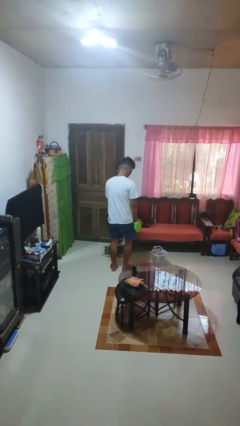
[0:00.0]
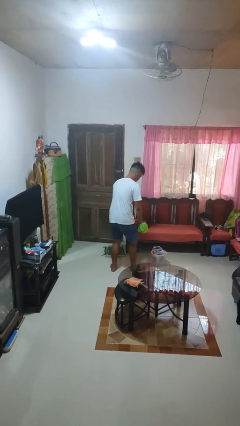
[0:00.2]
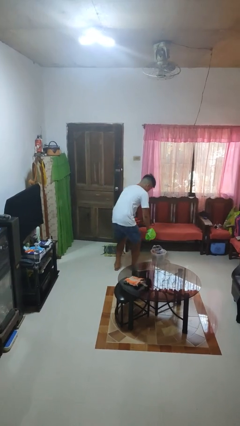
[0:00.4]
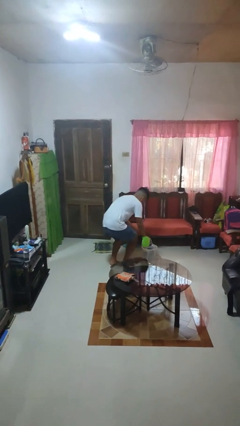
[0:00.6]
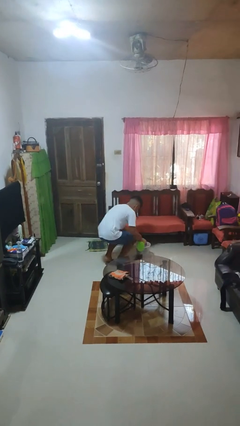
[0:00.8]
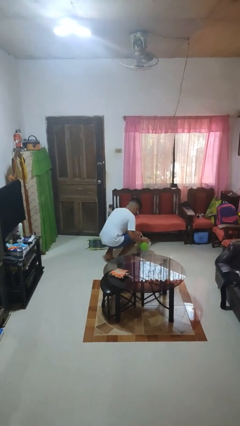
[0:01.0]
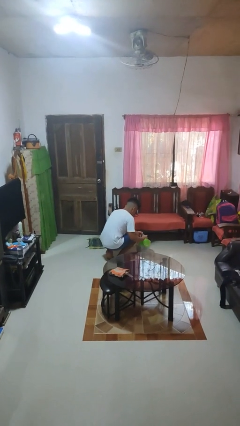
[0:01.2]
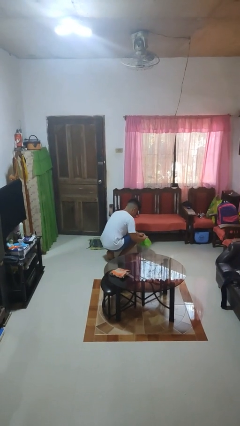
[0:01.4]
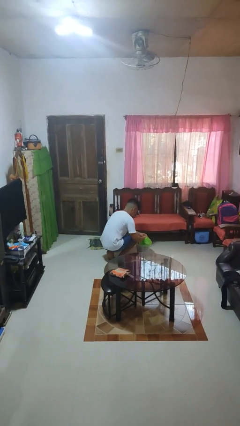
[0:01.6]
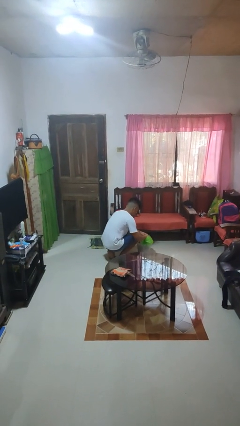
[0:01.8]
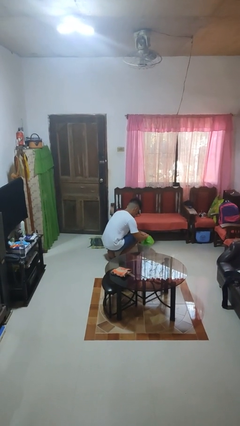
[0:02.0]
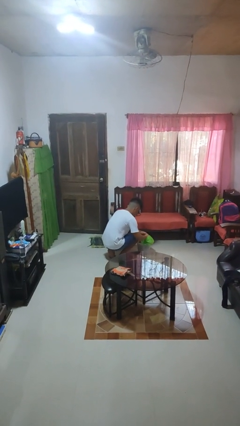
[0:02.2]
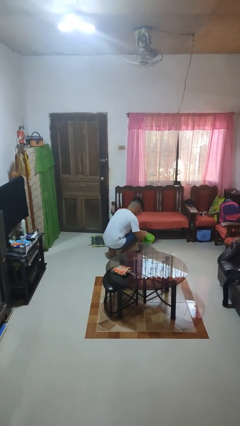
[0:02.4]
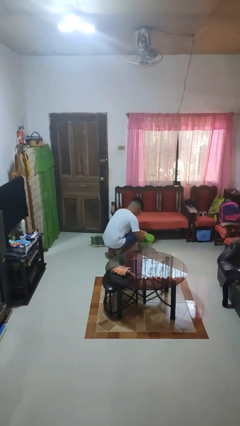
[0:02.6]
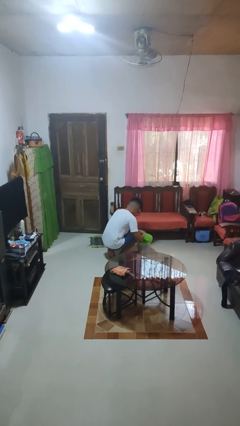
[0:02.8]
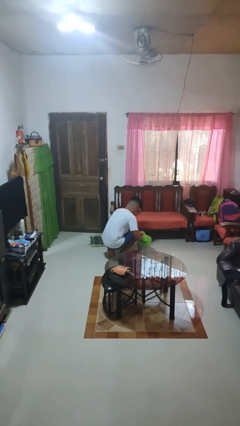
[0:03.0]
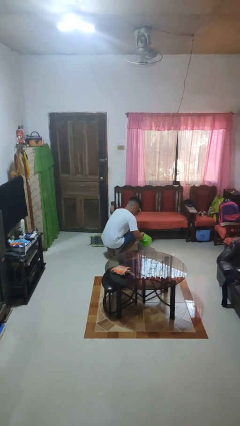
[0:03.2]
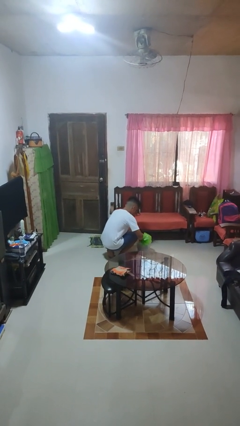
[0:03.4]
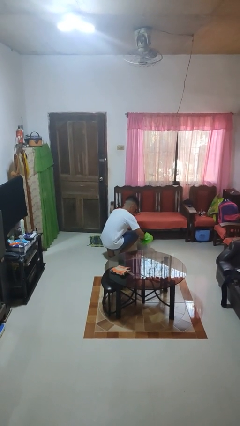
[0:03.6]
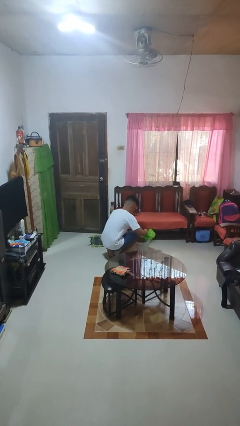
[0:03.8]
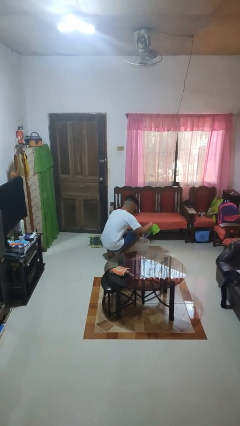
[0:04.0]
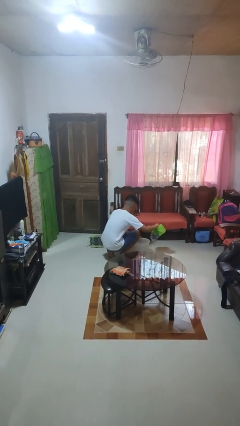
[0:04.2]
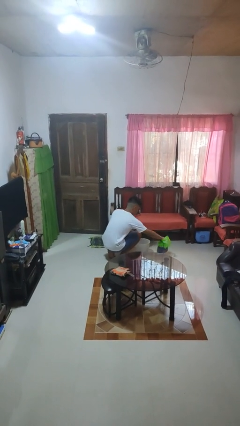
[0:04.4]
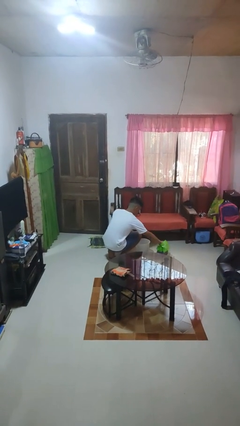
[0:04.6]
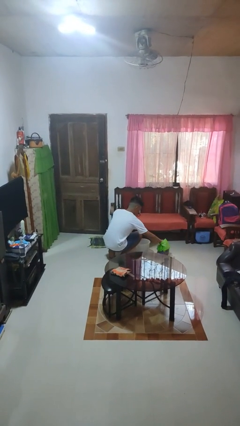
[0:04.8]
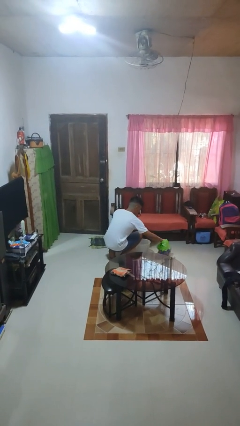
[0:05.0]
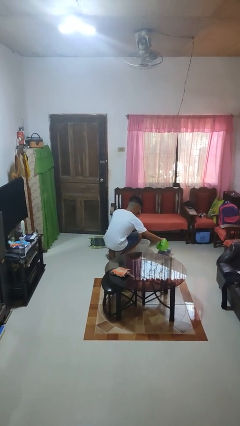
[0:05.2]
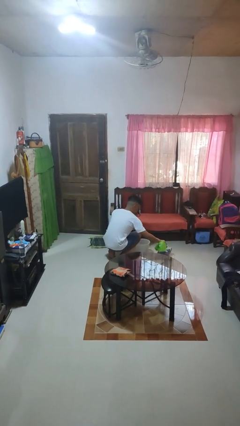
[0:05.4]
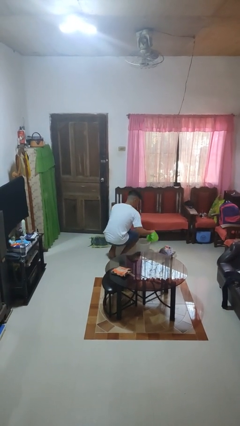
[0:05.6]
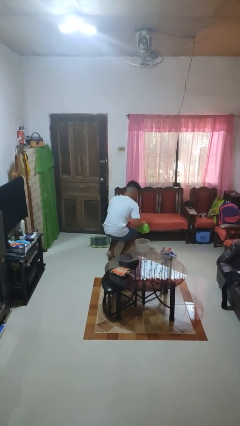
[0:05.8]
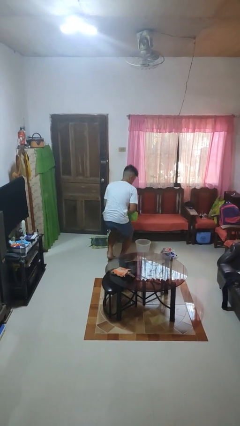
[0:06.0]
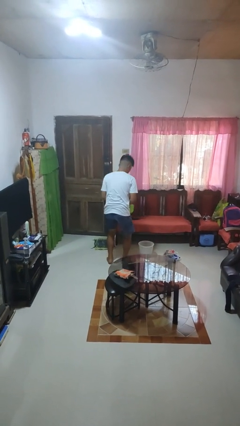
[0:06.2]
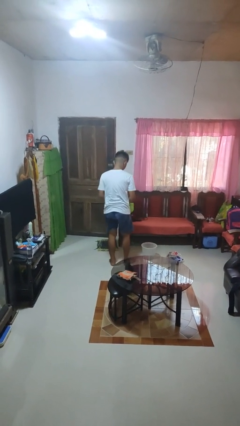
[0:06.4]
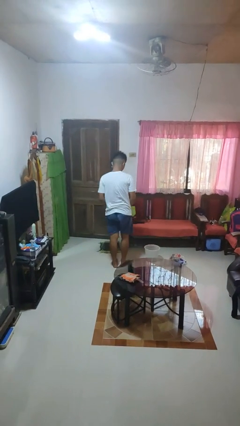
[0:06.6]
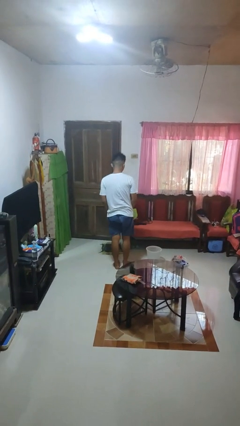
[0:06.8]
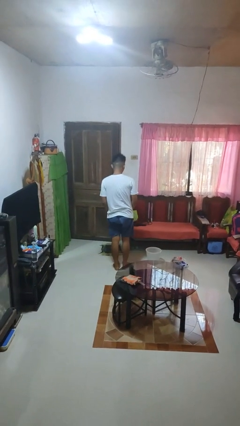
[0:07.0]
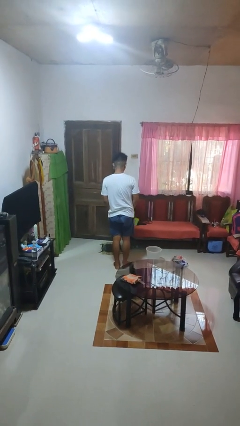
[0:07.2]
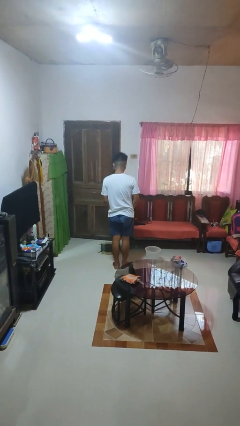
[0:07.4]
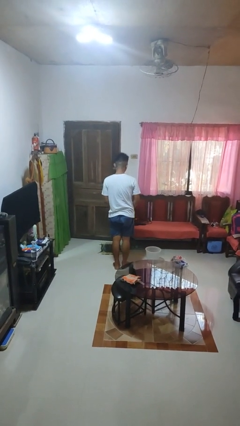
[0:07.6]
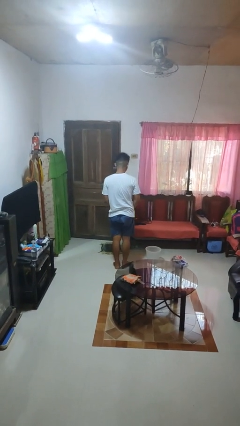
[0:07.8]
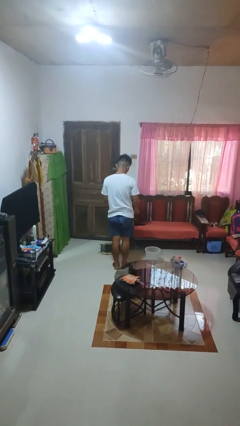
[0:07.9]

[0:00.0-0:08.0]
person removes trashbag from trashcan

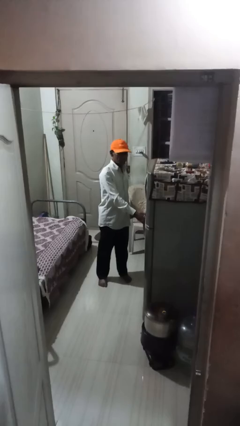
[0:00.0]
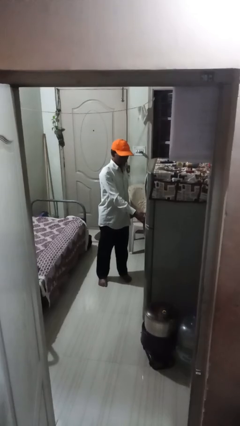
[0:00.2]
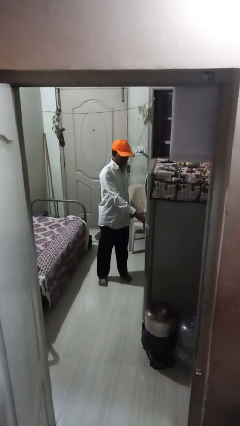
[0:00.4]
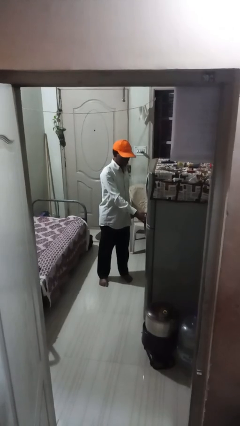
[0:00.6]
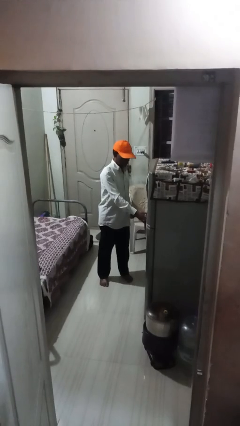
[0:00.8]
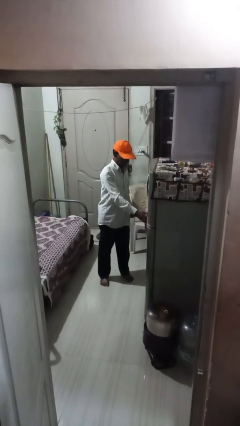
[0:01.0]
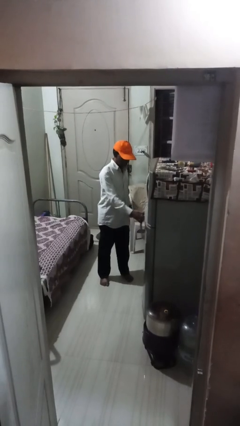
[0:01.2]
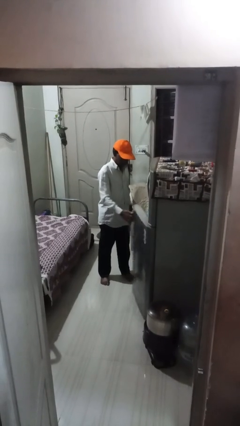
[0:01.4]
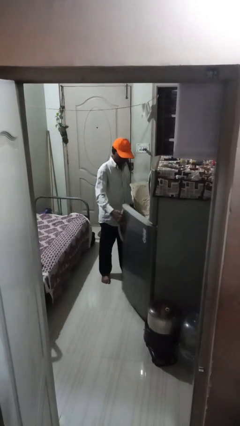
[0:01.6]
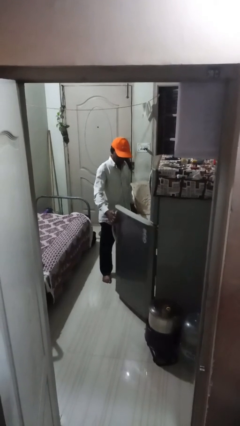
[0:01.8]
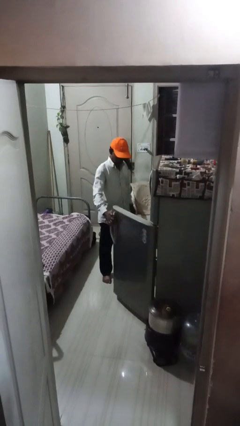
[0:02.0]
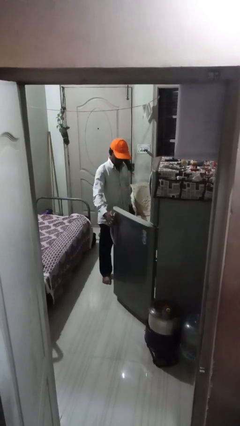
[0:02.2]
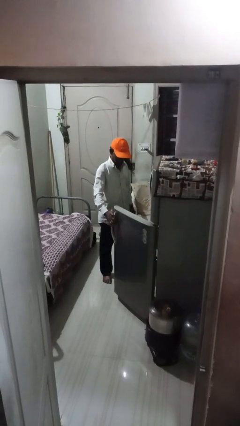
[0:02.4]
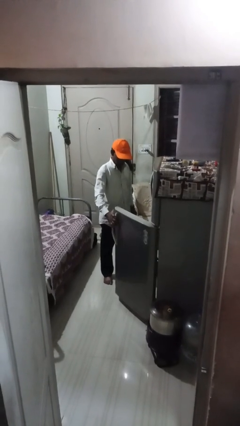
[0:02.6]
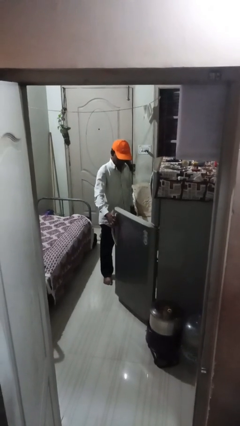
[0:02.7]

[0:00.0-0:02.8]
person opens refrigerator

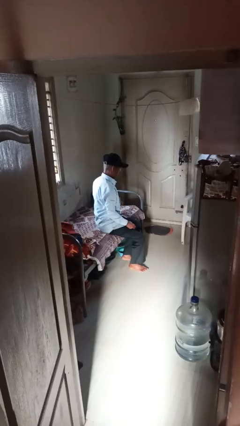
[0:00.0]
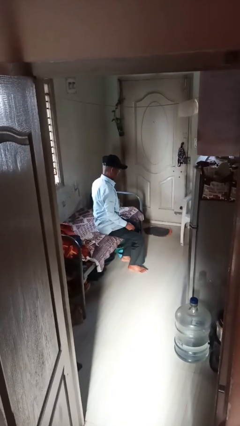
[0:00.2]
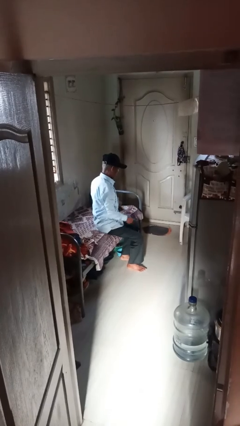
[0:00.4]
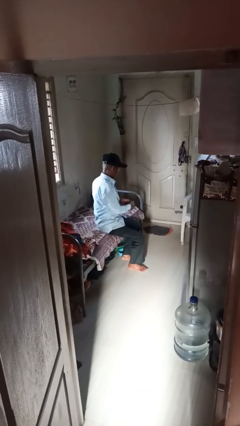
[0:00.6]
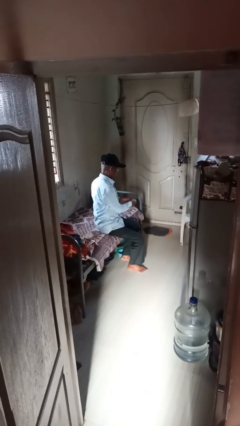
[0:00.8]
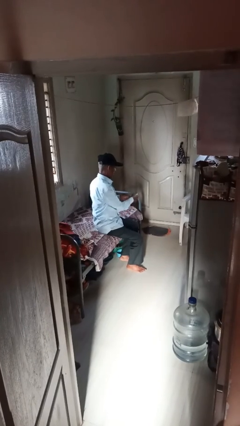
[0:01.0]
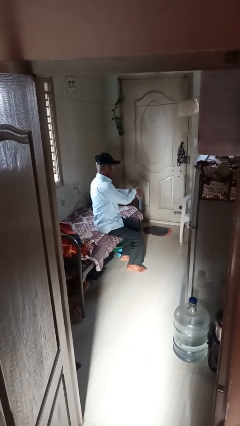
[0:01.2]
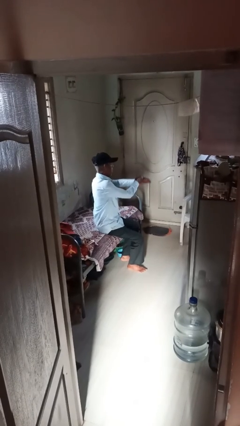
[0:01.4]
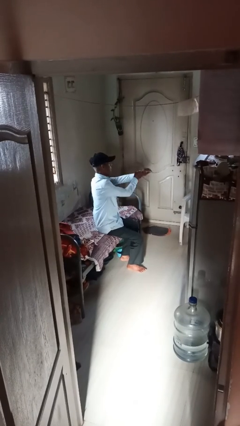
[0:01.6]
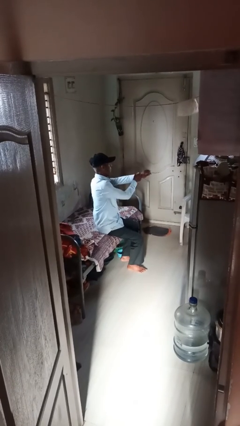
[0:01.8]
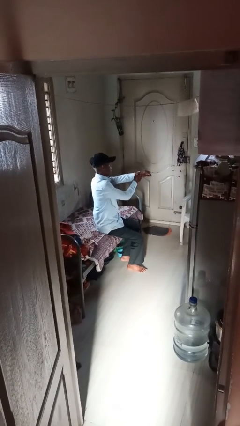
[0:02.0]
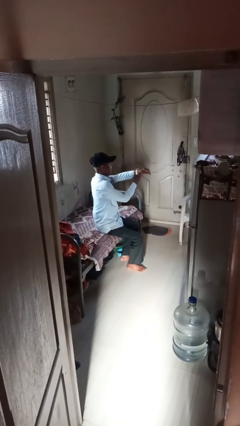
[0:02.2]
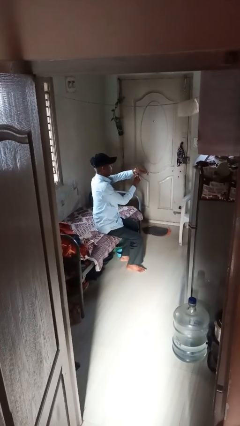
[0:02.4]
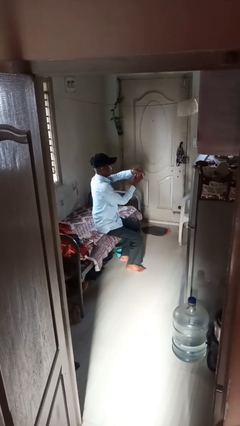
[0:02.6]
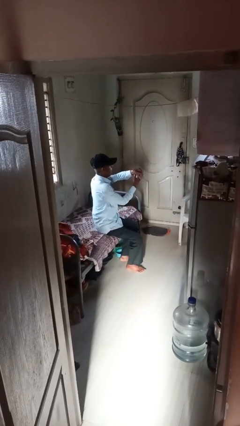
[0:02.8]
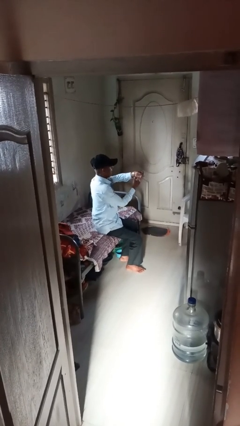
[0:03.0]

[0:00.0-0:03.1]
person puts on wristwatch

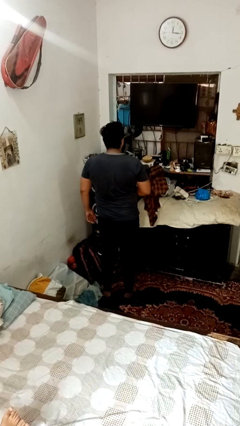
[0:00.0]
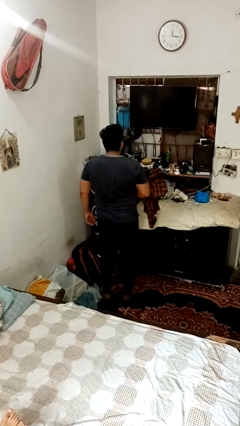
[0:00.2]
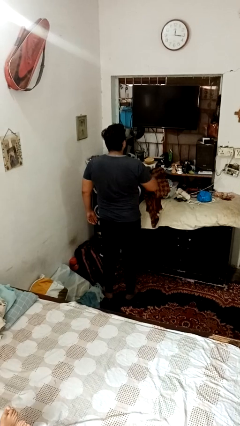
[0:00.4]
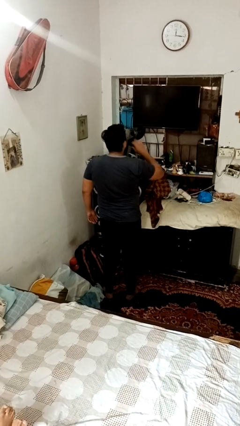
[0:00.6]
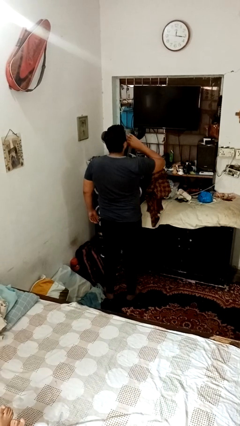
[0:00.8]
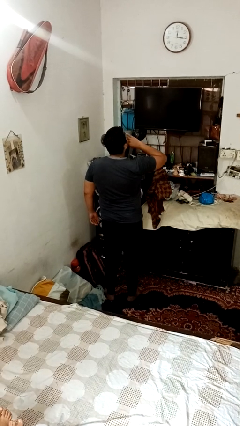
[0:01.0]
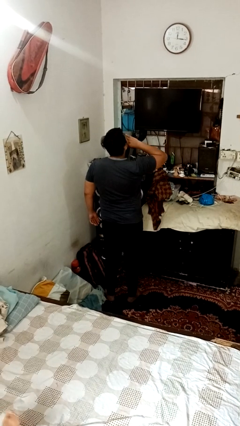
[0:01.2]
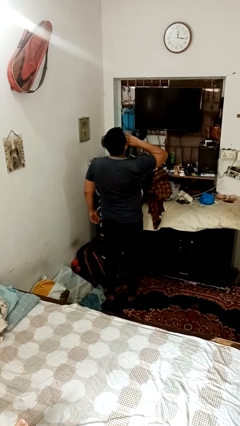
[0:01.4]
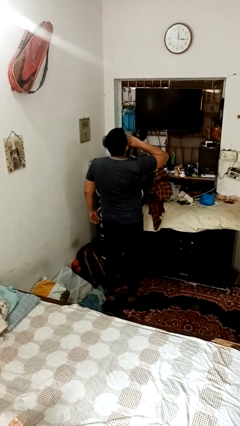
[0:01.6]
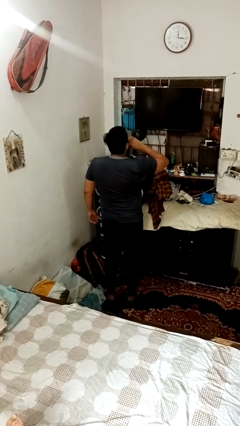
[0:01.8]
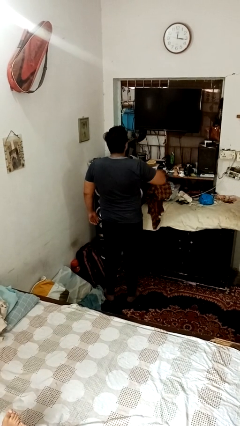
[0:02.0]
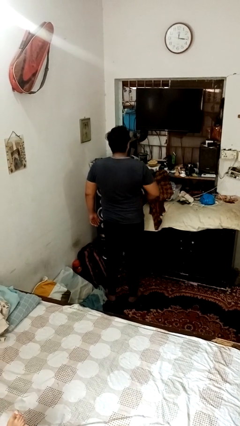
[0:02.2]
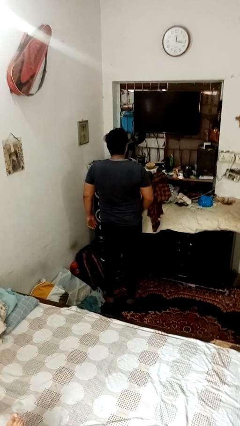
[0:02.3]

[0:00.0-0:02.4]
person yawns

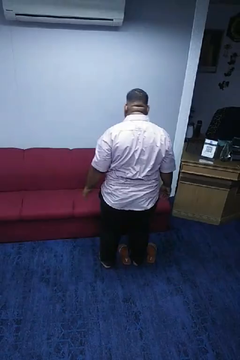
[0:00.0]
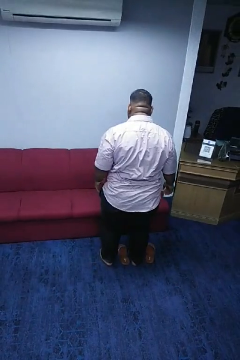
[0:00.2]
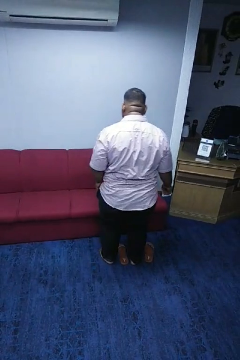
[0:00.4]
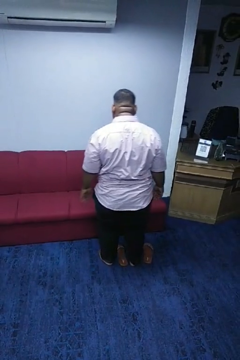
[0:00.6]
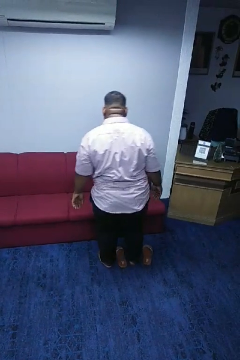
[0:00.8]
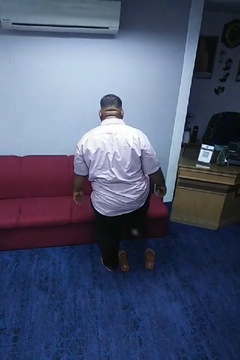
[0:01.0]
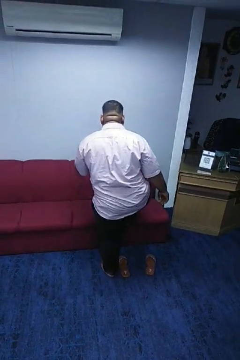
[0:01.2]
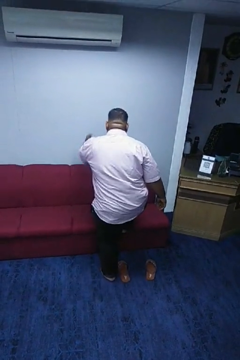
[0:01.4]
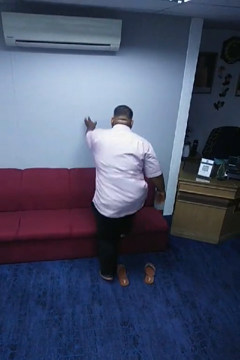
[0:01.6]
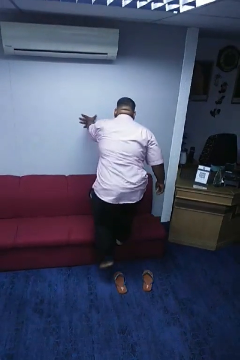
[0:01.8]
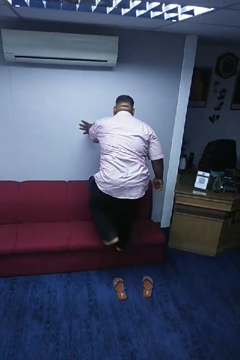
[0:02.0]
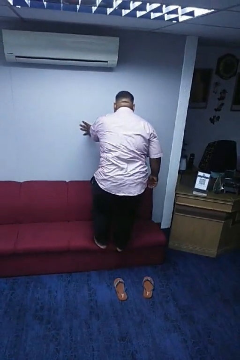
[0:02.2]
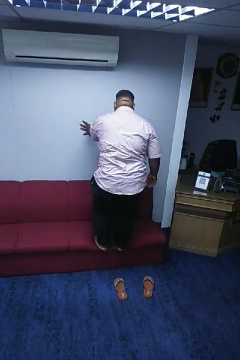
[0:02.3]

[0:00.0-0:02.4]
person climbs on couch
